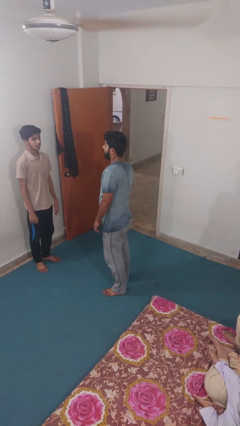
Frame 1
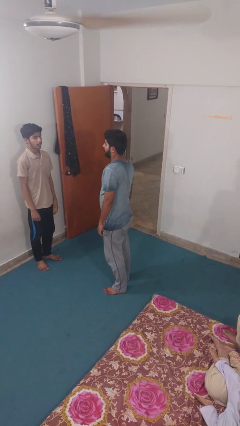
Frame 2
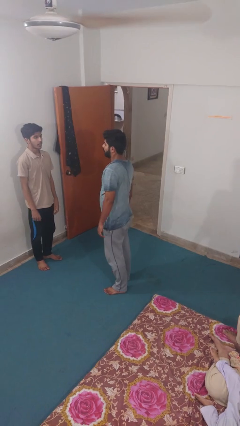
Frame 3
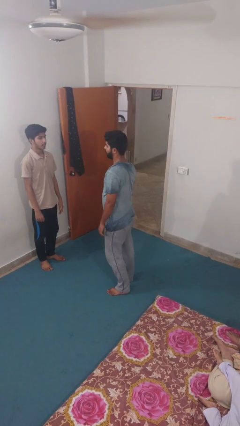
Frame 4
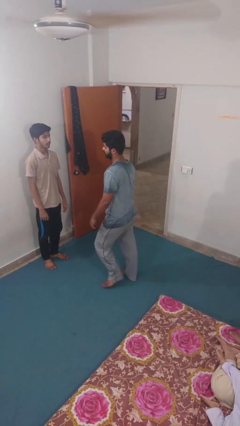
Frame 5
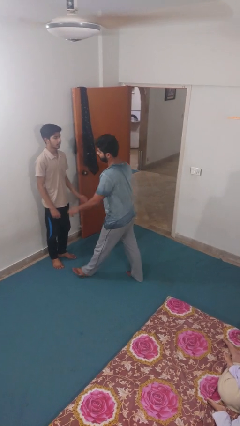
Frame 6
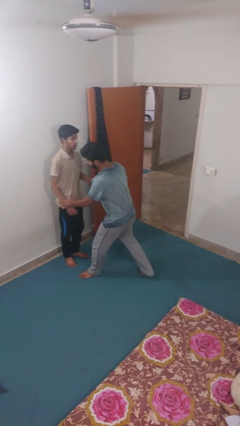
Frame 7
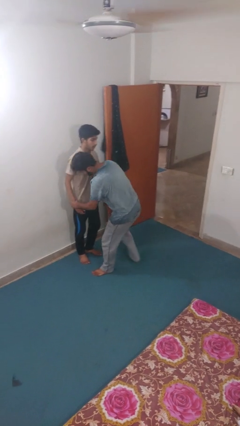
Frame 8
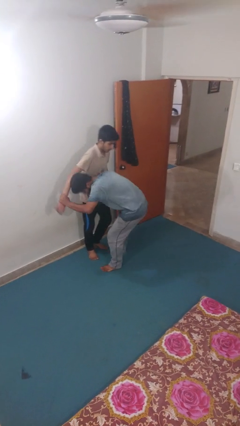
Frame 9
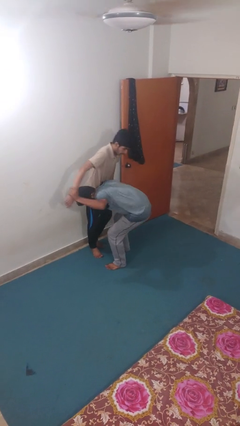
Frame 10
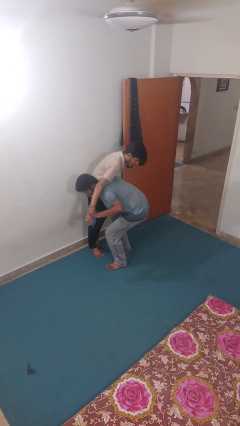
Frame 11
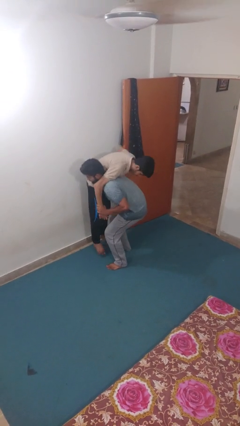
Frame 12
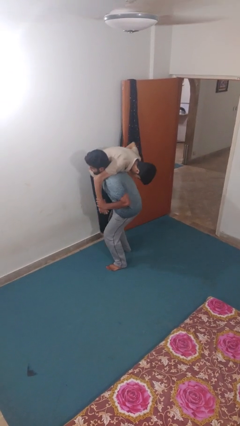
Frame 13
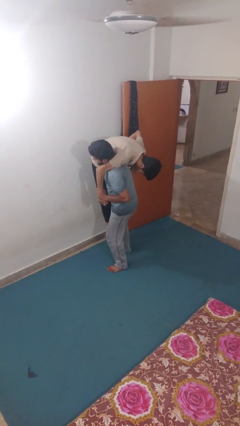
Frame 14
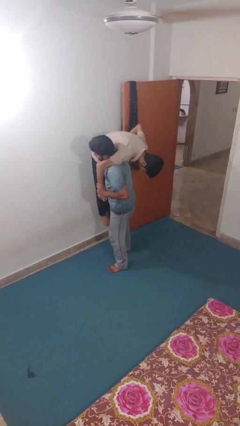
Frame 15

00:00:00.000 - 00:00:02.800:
person carries person over shoulder

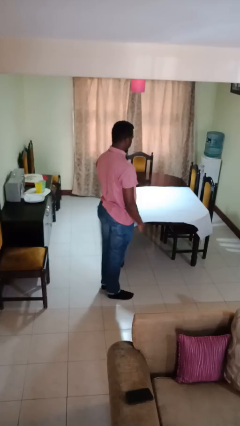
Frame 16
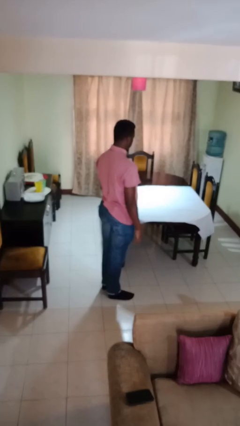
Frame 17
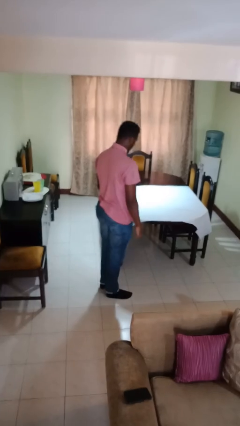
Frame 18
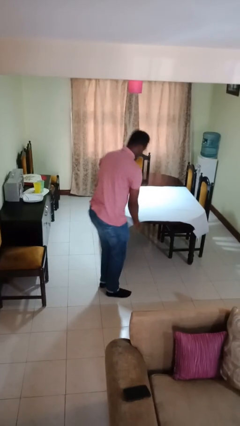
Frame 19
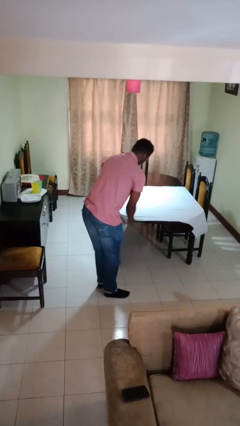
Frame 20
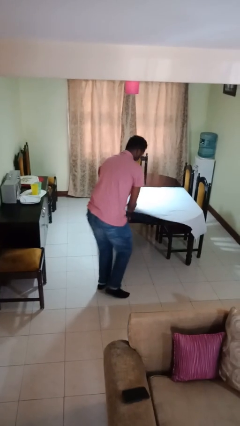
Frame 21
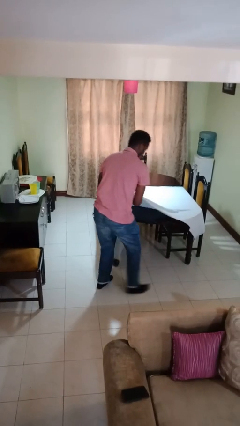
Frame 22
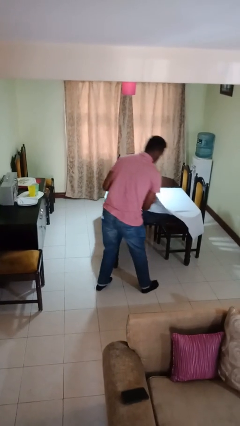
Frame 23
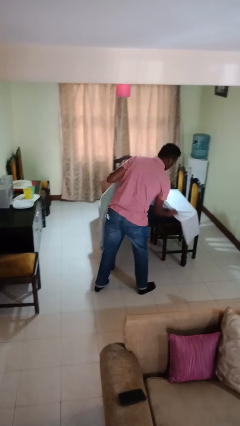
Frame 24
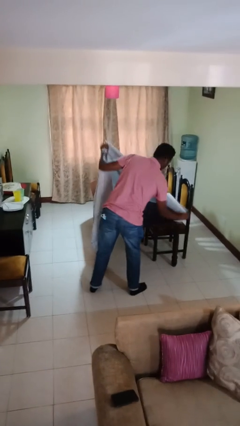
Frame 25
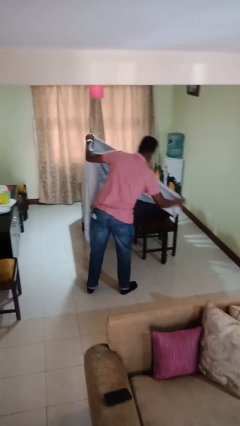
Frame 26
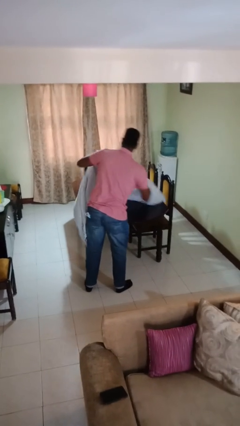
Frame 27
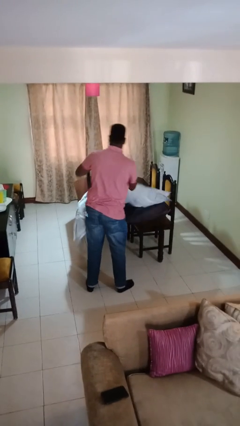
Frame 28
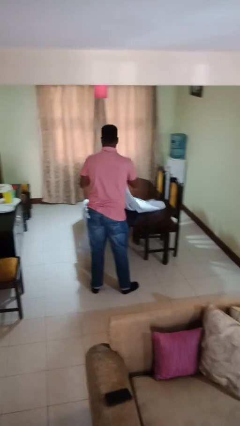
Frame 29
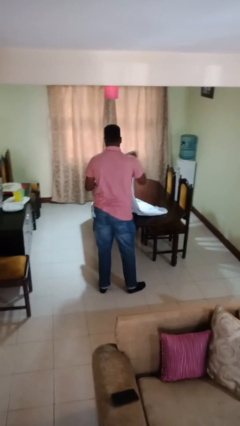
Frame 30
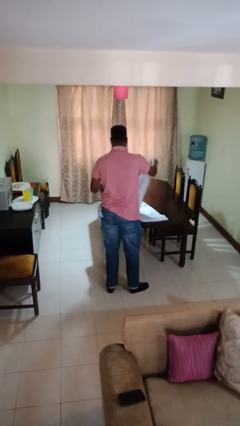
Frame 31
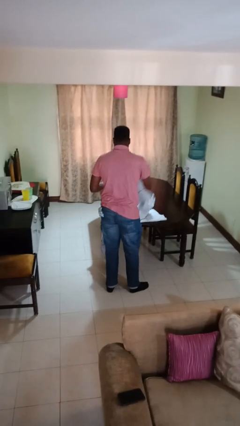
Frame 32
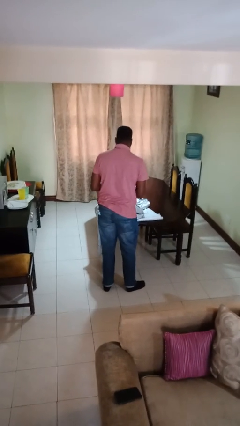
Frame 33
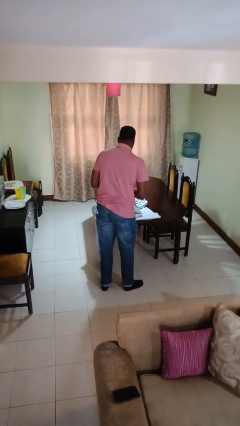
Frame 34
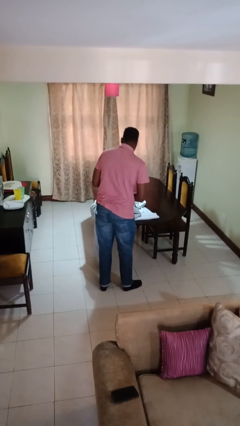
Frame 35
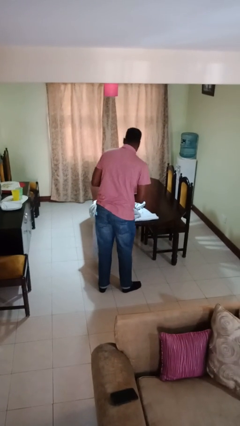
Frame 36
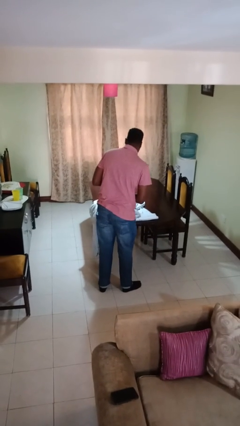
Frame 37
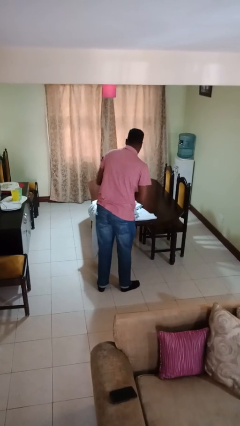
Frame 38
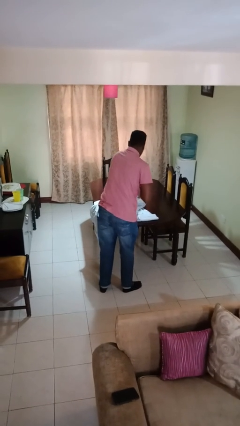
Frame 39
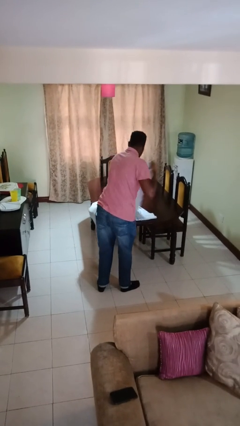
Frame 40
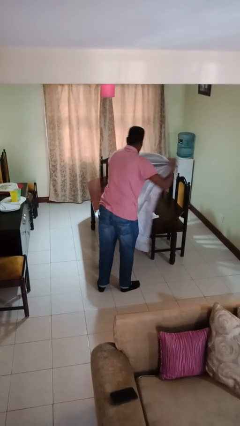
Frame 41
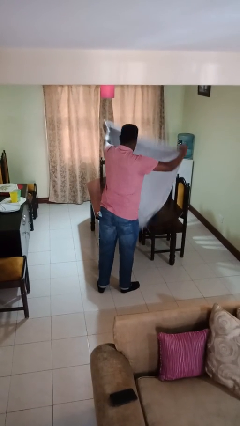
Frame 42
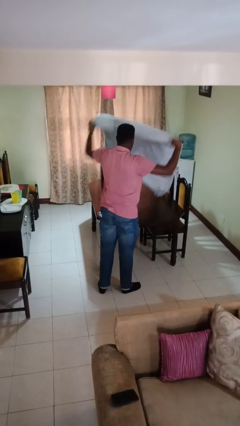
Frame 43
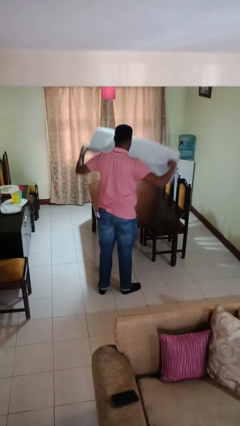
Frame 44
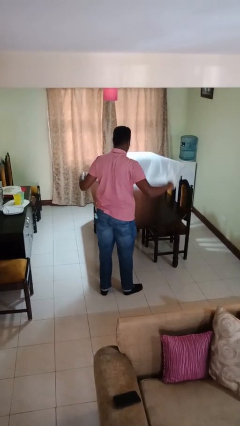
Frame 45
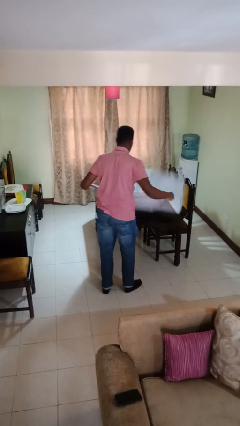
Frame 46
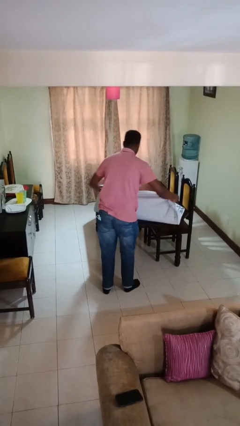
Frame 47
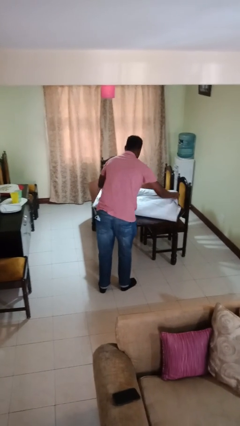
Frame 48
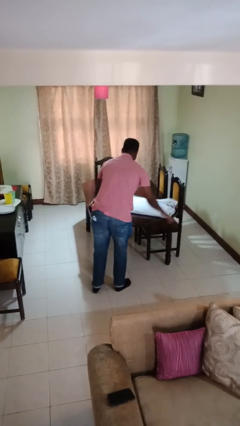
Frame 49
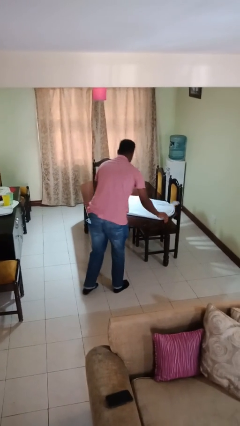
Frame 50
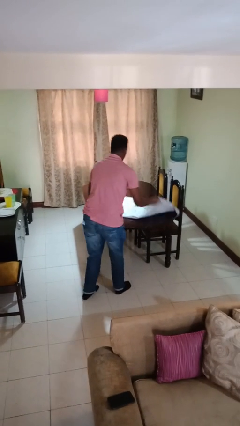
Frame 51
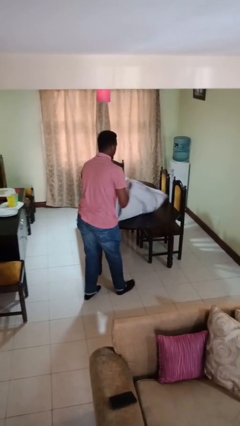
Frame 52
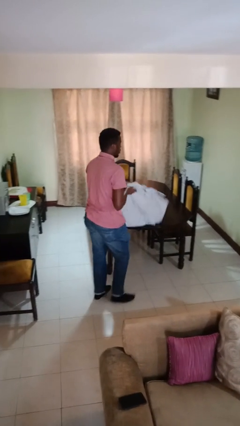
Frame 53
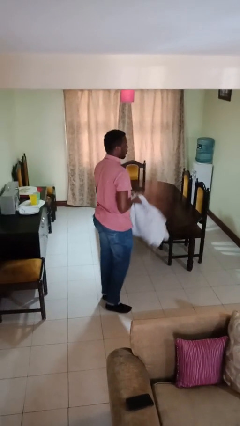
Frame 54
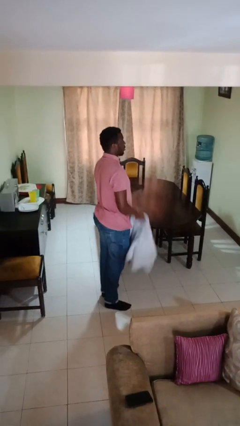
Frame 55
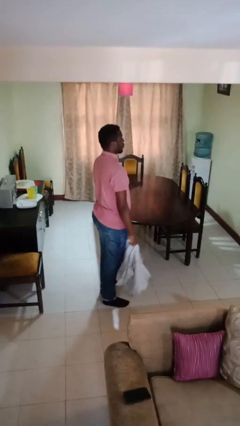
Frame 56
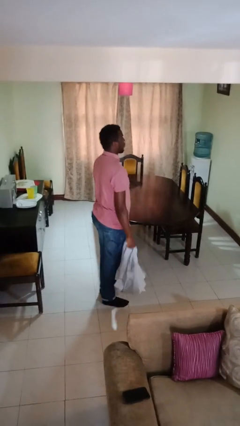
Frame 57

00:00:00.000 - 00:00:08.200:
person folds tablecloth

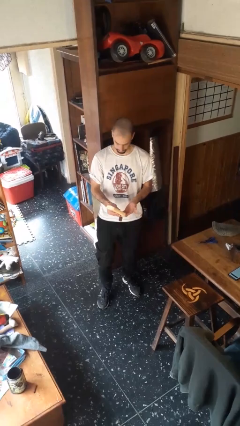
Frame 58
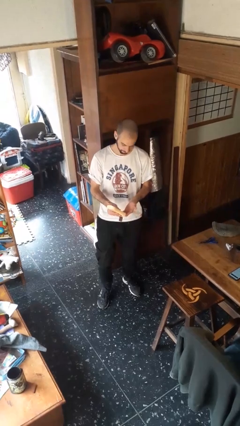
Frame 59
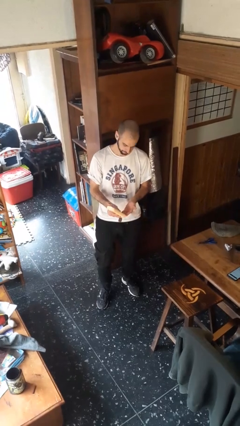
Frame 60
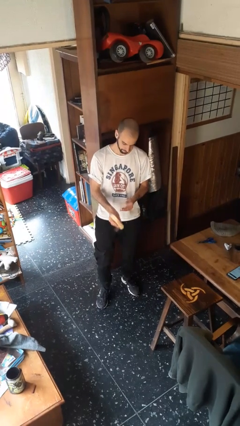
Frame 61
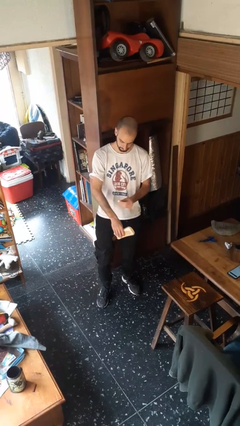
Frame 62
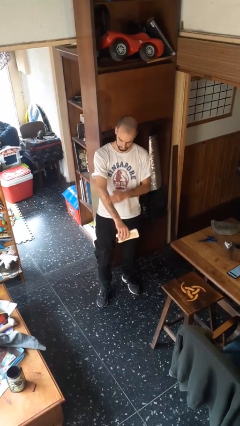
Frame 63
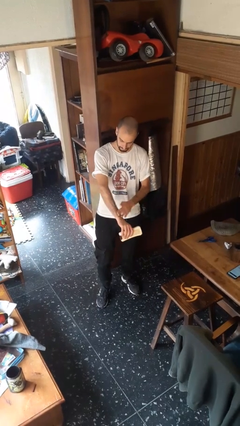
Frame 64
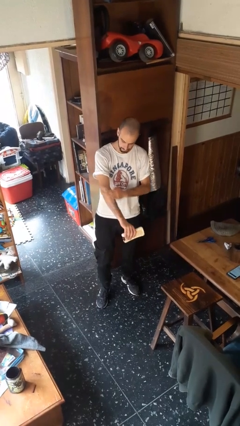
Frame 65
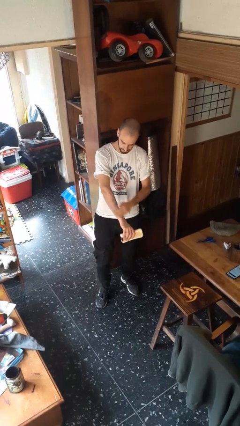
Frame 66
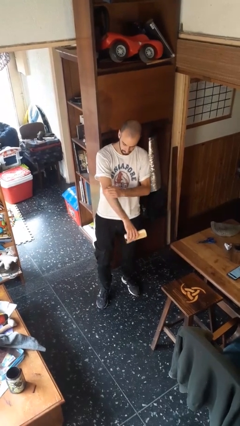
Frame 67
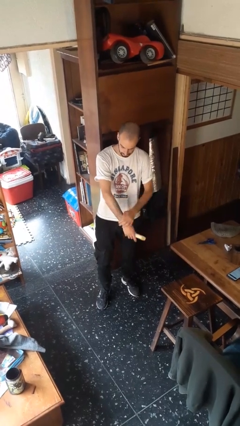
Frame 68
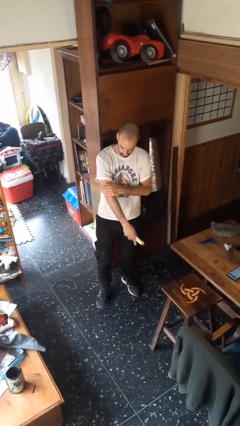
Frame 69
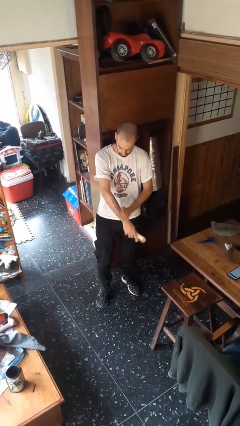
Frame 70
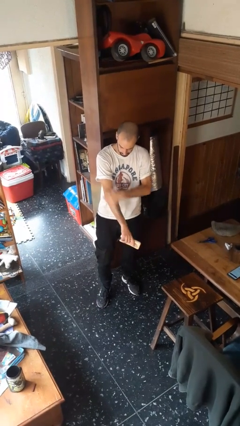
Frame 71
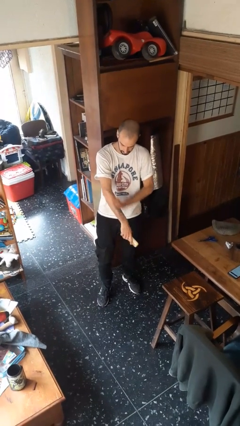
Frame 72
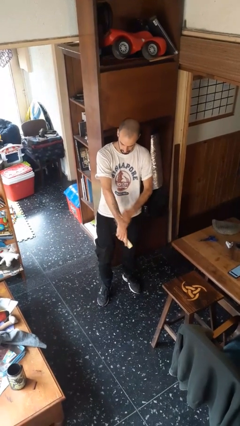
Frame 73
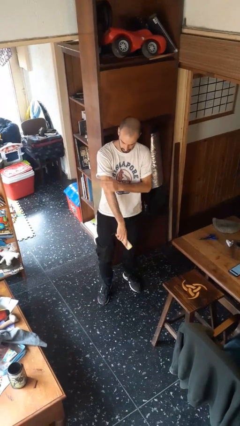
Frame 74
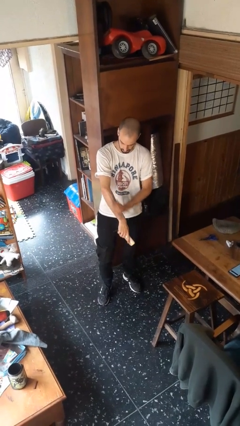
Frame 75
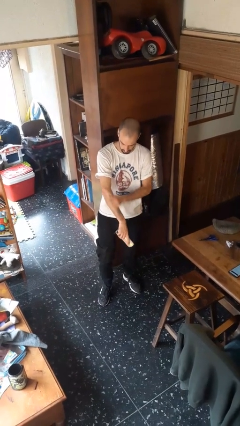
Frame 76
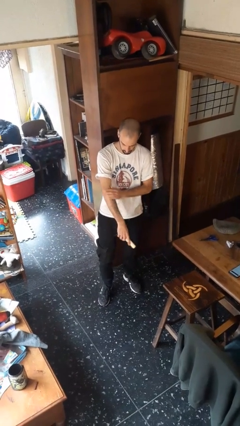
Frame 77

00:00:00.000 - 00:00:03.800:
person applies sunscreen

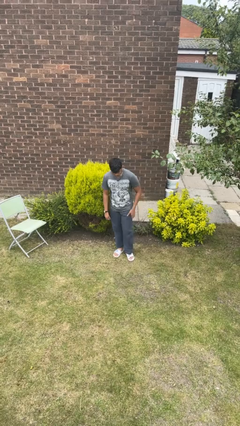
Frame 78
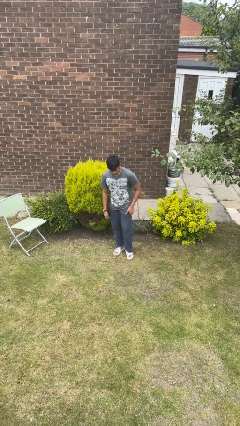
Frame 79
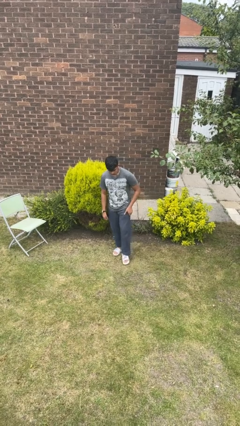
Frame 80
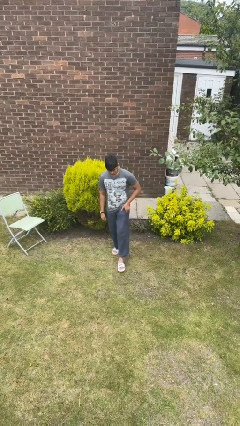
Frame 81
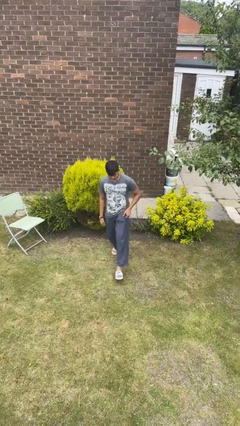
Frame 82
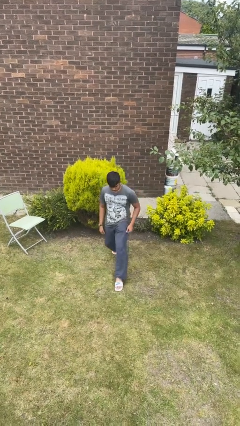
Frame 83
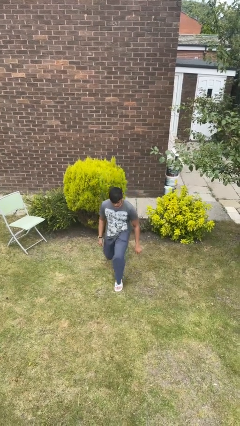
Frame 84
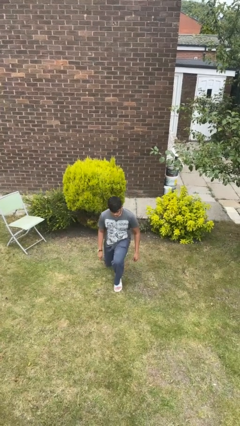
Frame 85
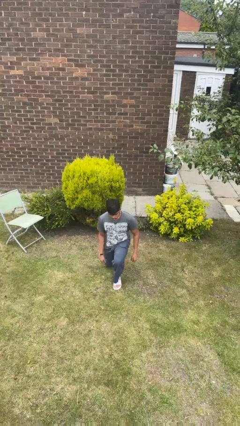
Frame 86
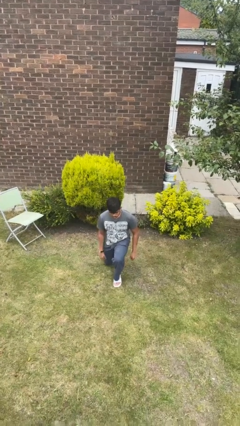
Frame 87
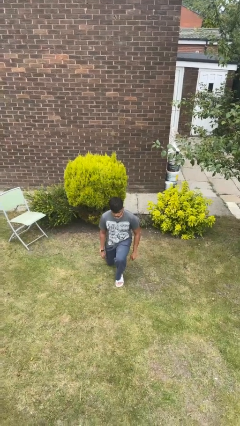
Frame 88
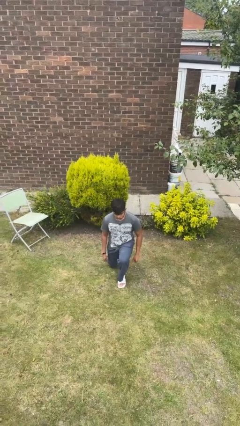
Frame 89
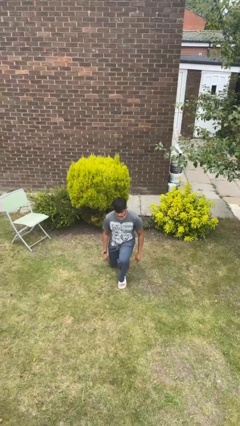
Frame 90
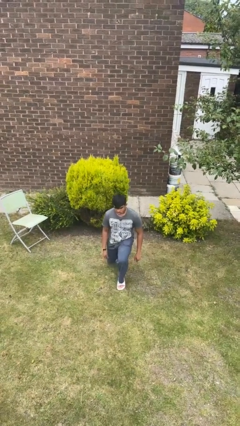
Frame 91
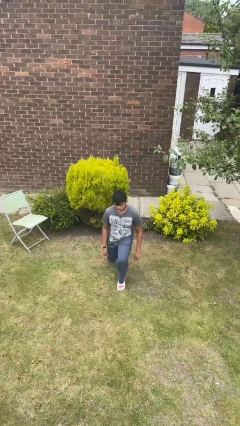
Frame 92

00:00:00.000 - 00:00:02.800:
person exercises with lunges

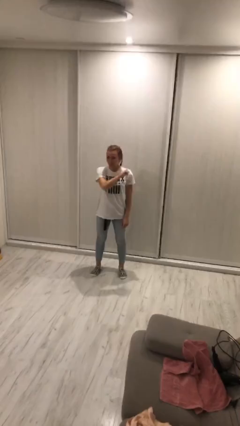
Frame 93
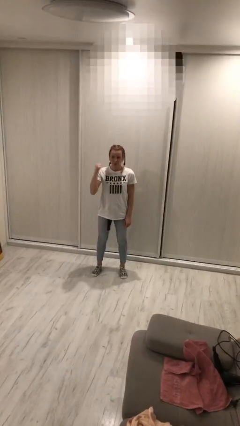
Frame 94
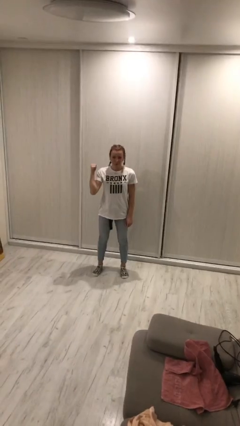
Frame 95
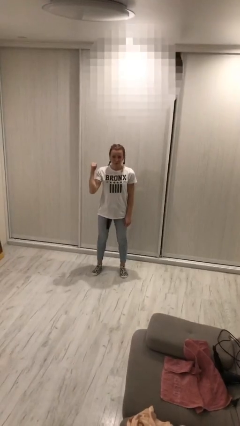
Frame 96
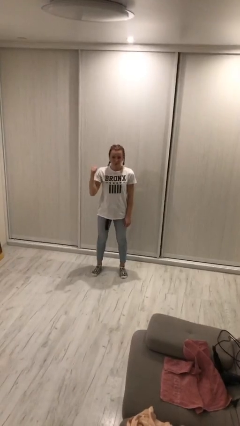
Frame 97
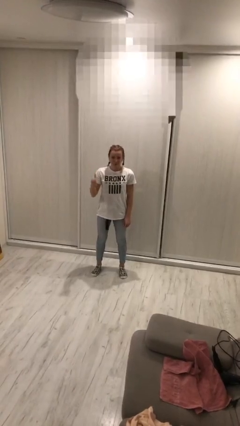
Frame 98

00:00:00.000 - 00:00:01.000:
person gestures cut
